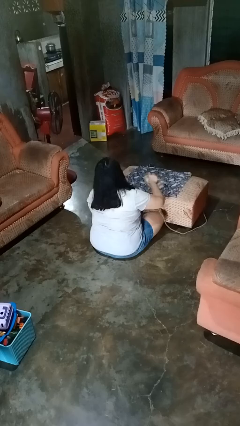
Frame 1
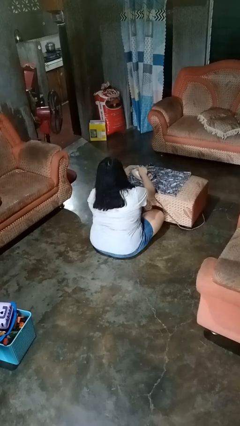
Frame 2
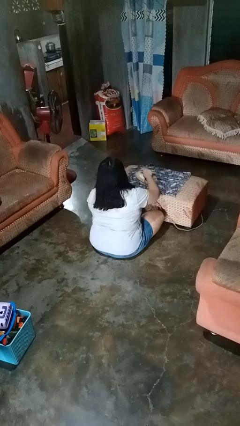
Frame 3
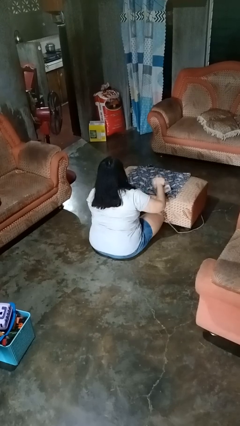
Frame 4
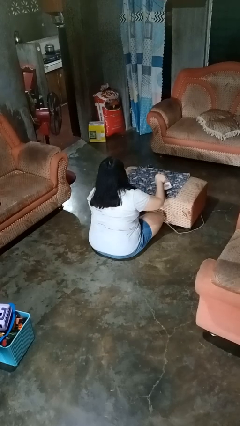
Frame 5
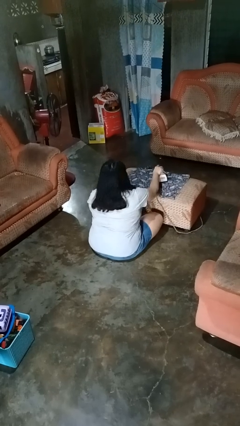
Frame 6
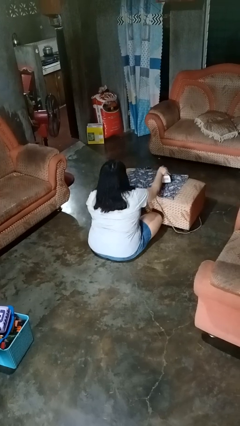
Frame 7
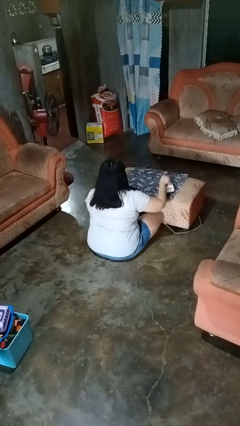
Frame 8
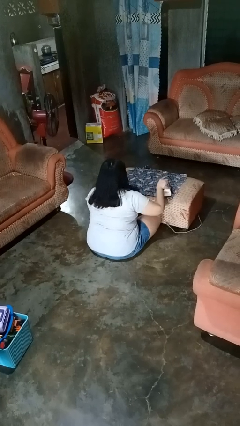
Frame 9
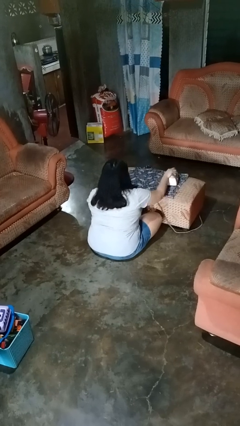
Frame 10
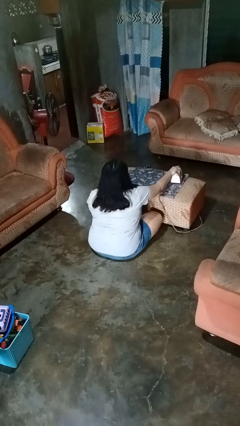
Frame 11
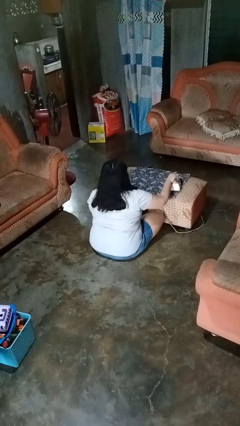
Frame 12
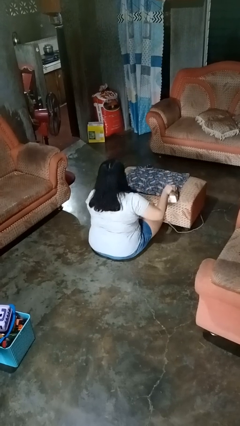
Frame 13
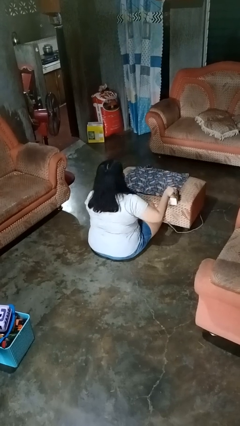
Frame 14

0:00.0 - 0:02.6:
person irons clothes

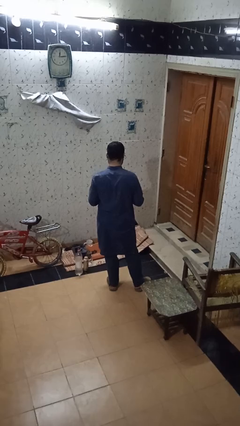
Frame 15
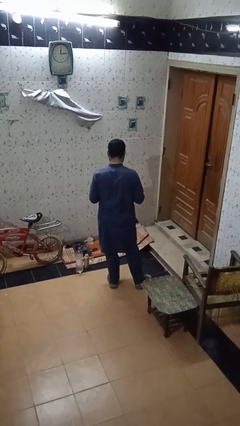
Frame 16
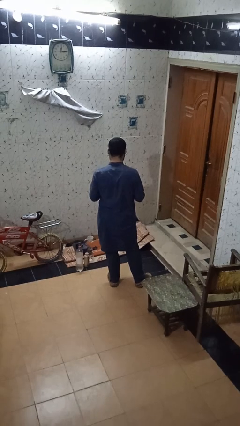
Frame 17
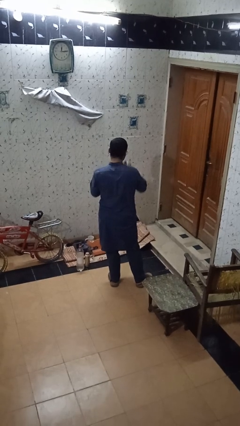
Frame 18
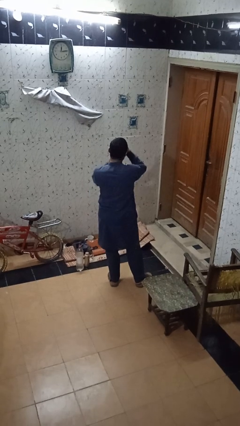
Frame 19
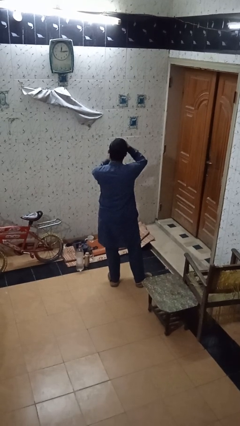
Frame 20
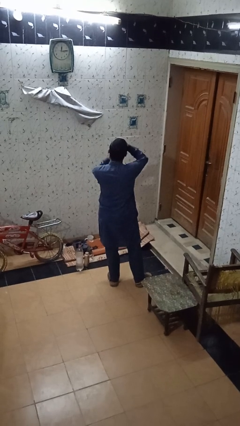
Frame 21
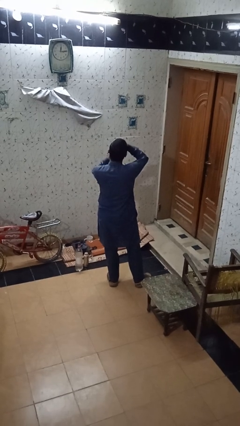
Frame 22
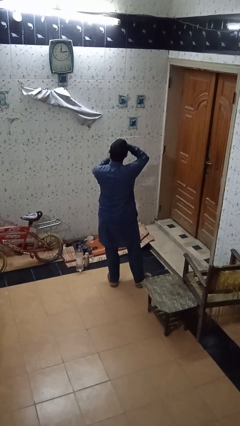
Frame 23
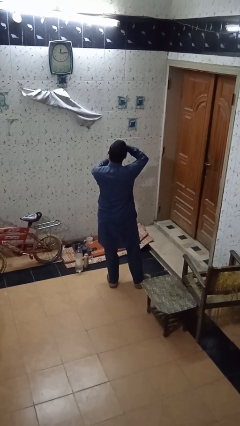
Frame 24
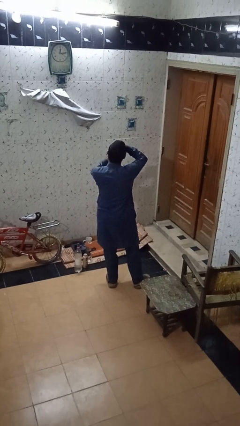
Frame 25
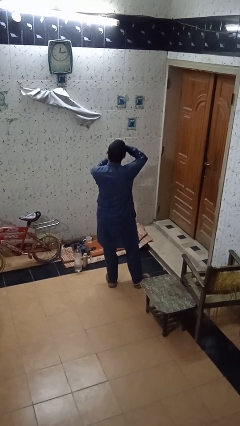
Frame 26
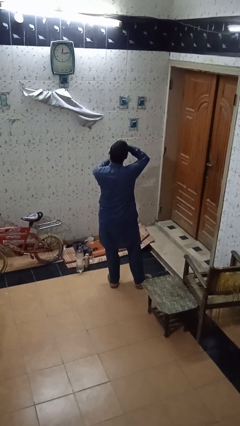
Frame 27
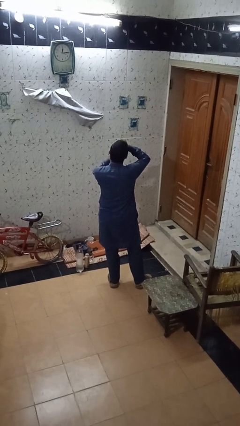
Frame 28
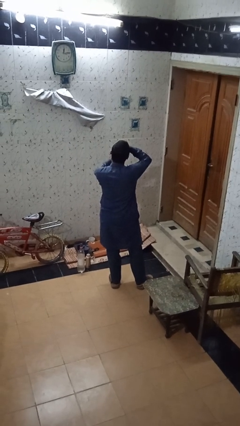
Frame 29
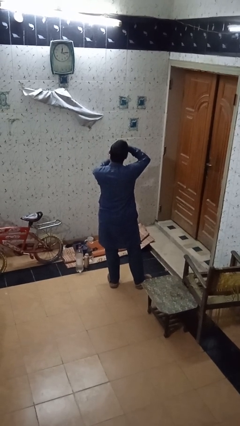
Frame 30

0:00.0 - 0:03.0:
person flosses

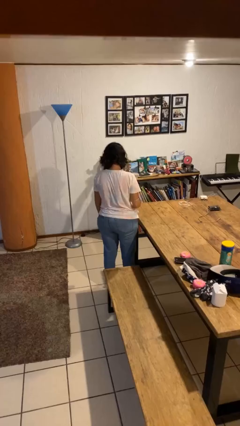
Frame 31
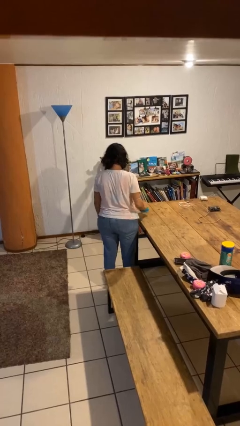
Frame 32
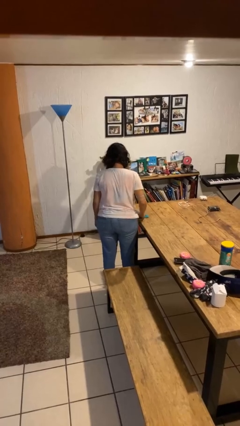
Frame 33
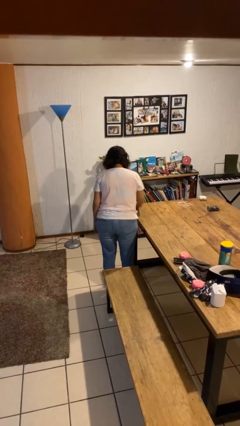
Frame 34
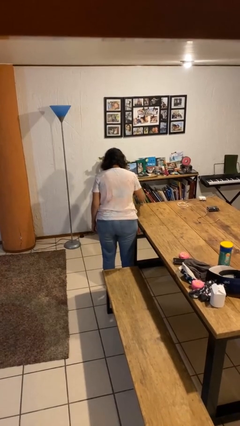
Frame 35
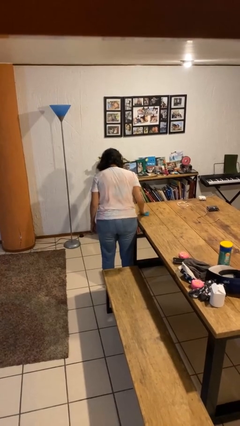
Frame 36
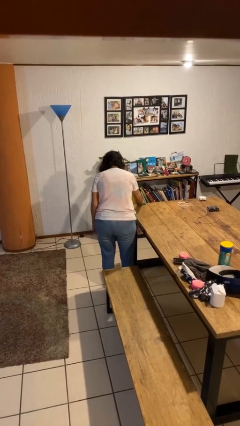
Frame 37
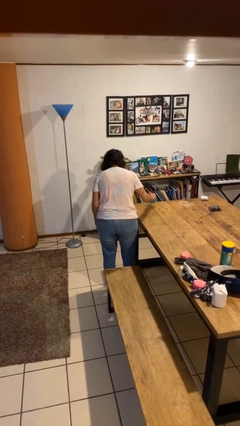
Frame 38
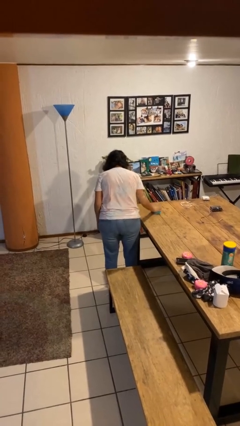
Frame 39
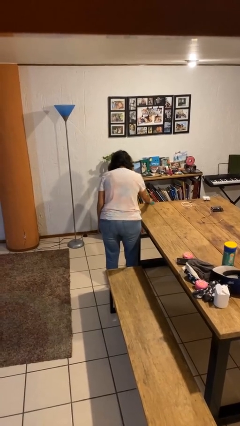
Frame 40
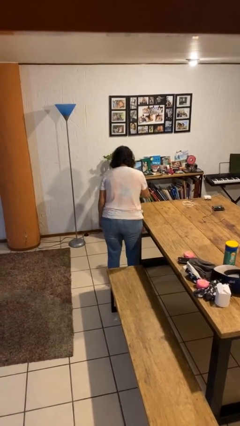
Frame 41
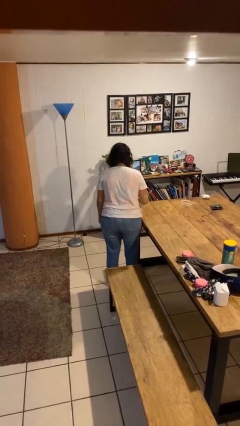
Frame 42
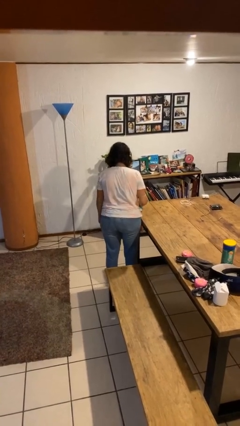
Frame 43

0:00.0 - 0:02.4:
person cleans table with rag

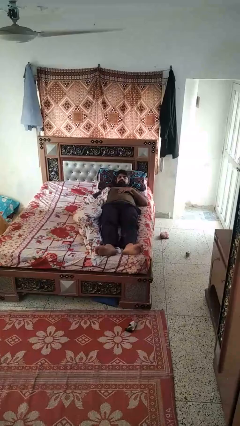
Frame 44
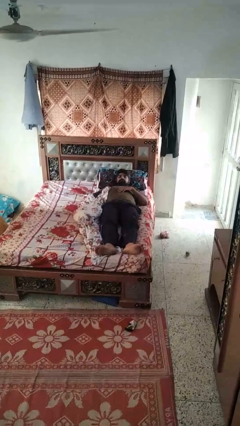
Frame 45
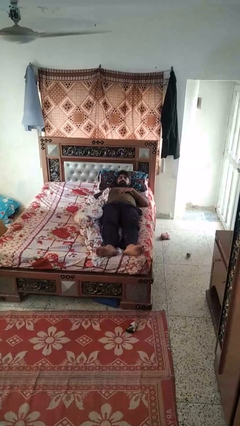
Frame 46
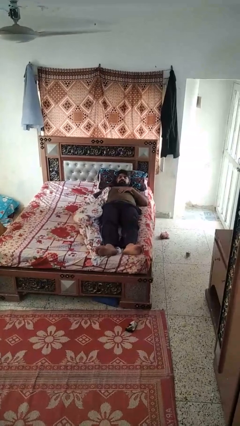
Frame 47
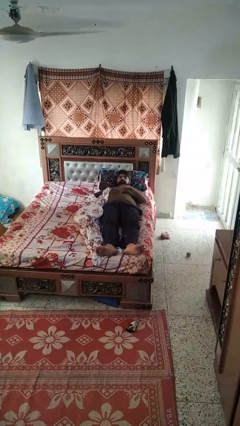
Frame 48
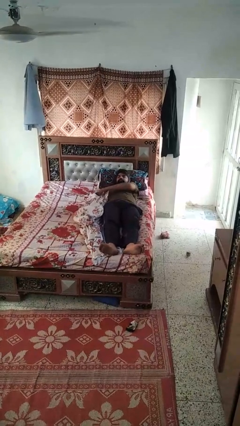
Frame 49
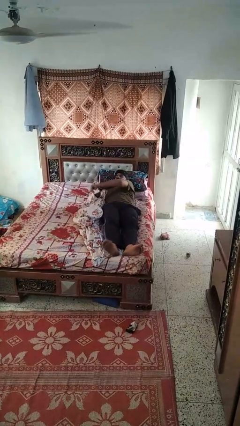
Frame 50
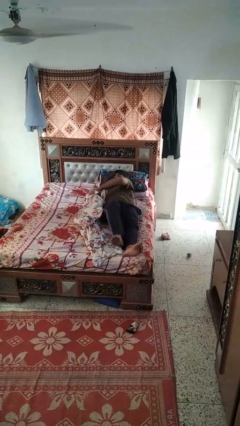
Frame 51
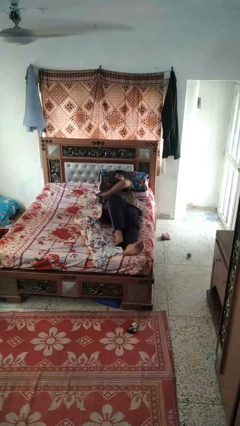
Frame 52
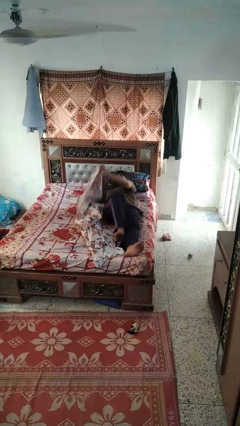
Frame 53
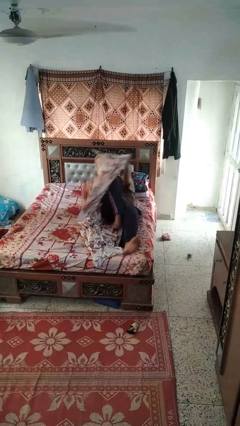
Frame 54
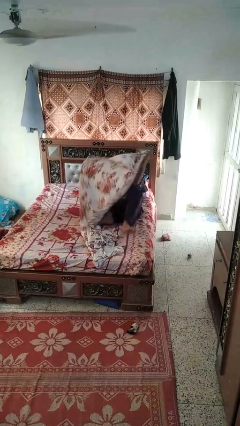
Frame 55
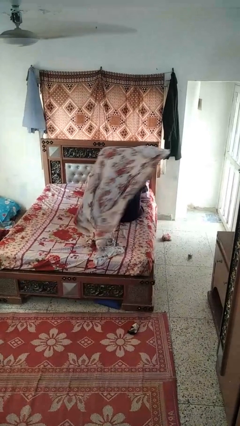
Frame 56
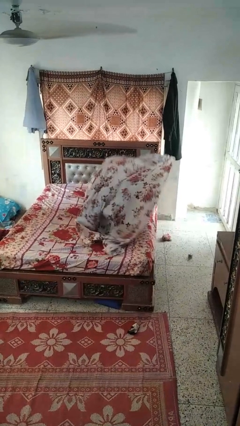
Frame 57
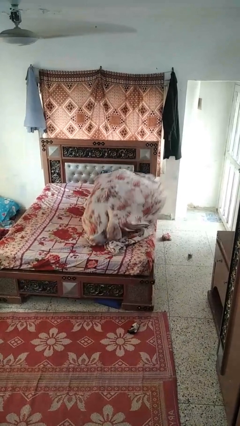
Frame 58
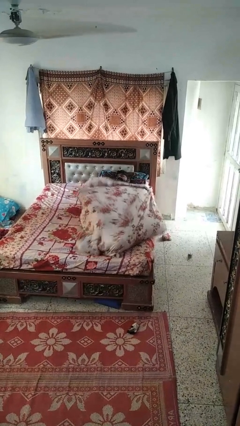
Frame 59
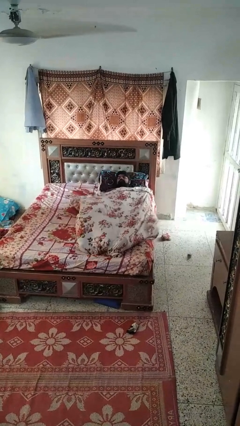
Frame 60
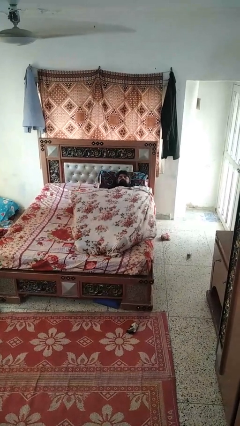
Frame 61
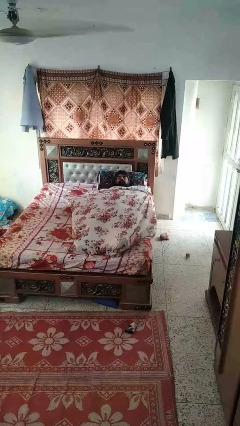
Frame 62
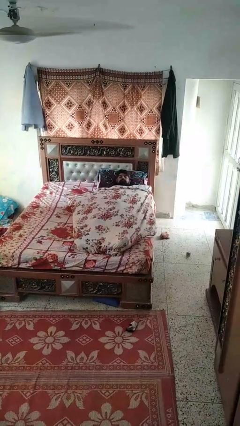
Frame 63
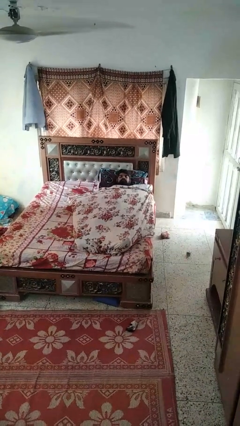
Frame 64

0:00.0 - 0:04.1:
person covers with bedsheets

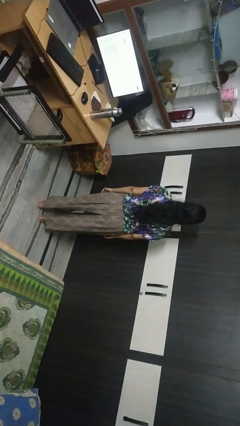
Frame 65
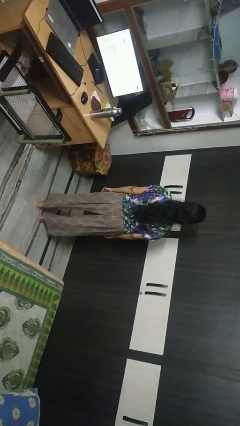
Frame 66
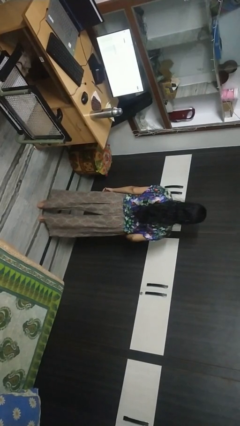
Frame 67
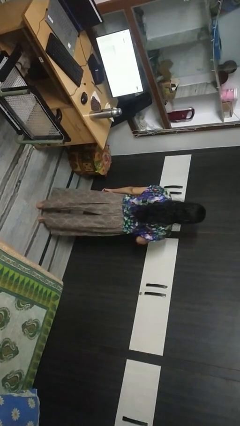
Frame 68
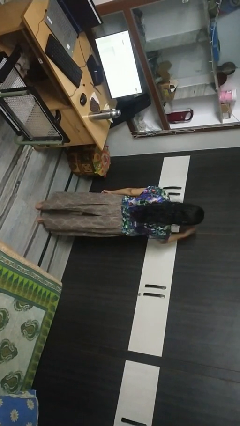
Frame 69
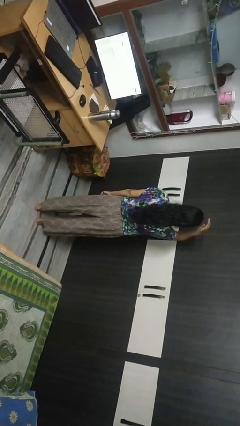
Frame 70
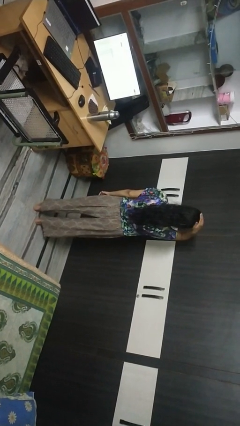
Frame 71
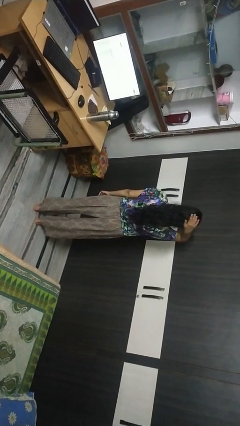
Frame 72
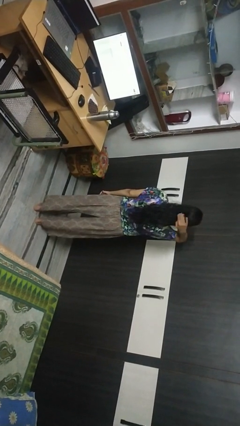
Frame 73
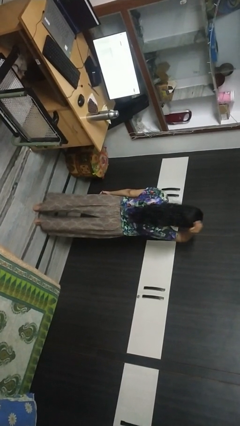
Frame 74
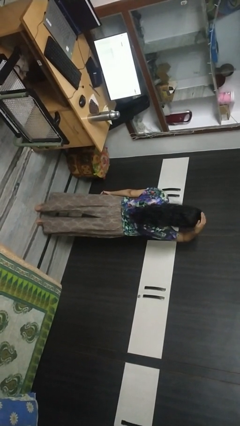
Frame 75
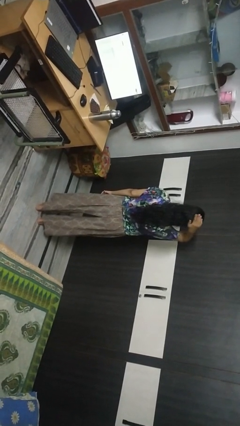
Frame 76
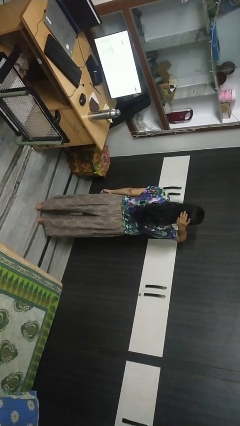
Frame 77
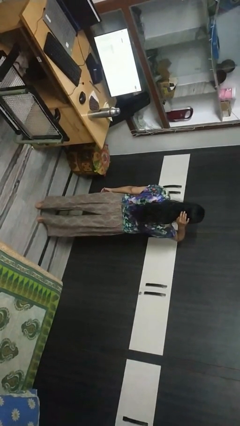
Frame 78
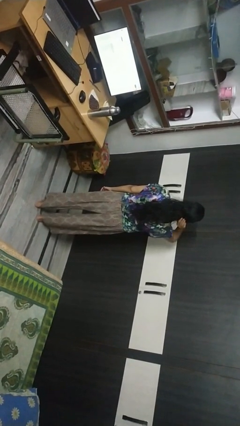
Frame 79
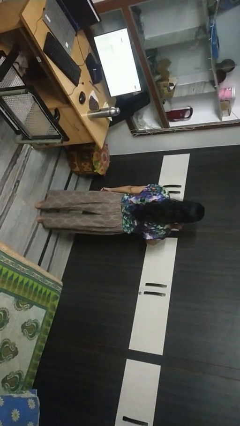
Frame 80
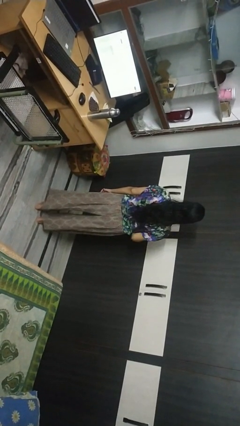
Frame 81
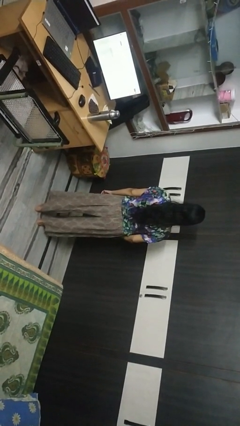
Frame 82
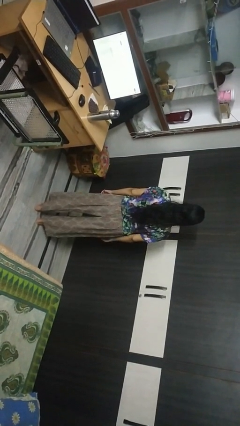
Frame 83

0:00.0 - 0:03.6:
person pats head

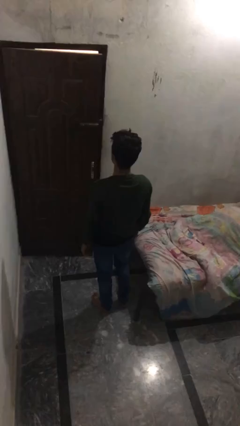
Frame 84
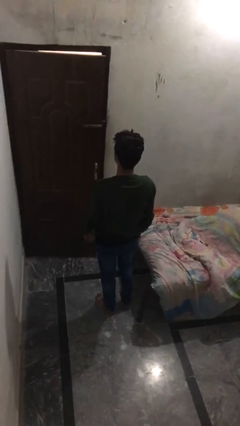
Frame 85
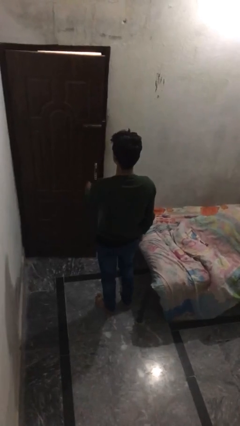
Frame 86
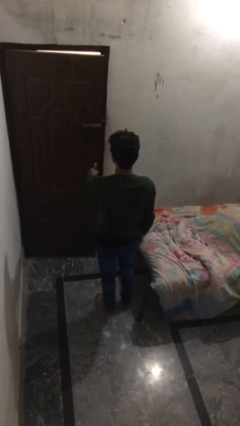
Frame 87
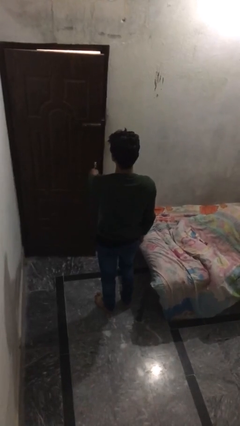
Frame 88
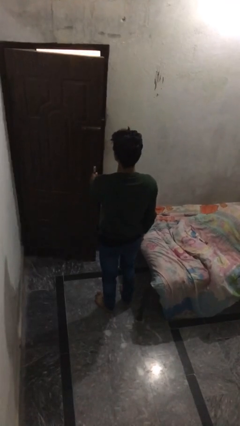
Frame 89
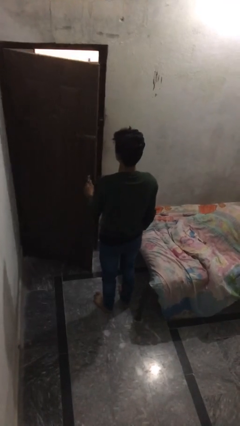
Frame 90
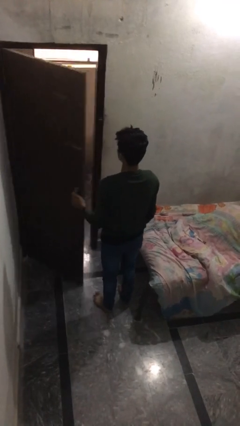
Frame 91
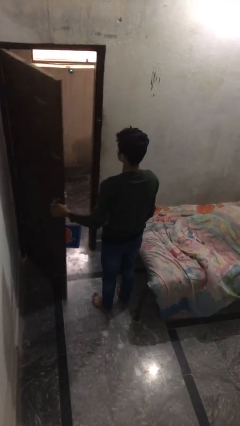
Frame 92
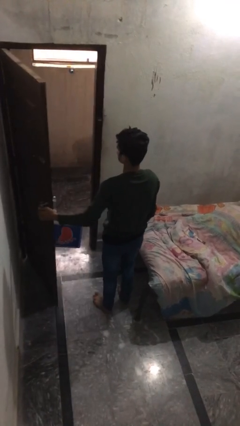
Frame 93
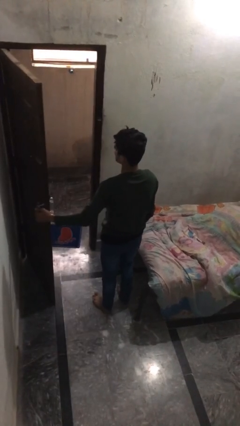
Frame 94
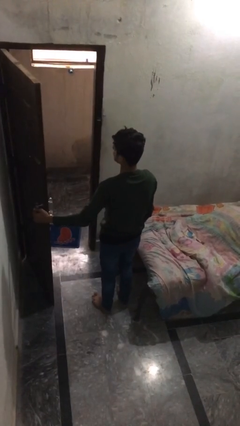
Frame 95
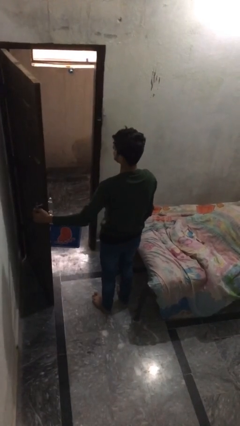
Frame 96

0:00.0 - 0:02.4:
person opens facility door
